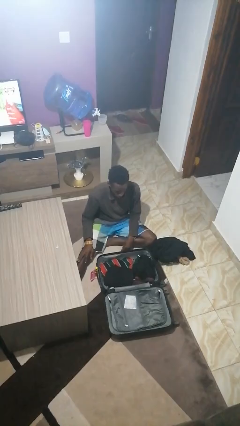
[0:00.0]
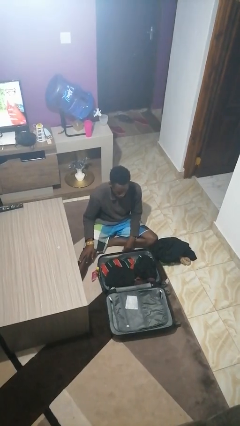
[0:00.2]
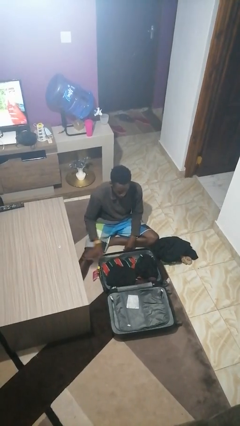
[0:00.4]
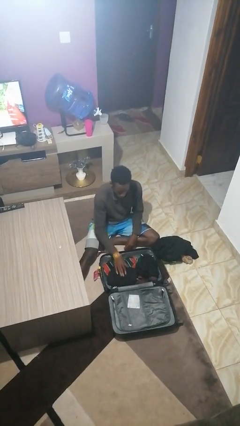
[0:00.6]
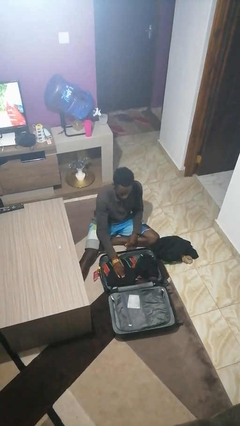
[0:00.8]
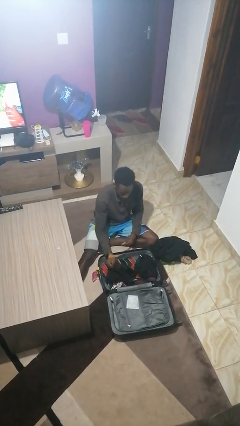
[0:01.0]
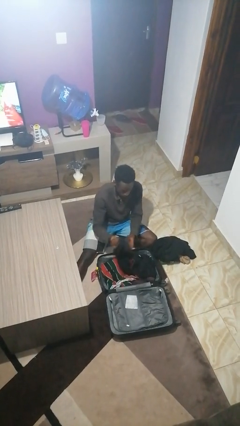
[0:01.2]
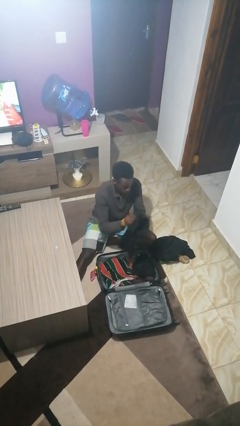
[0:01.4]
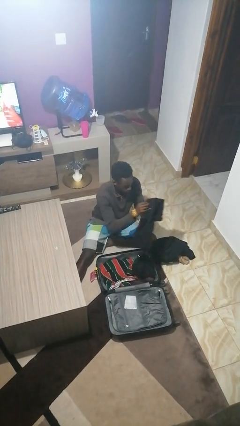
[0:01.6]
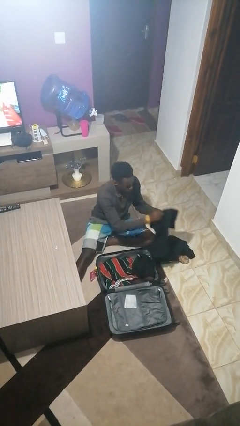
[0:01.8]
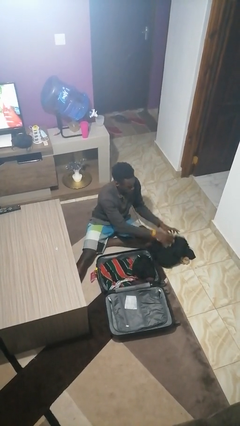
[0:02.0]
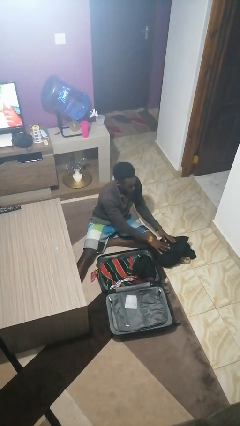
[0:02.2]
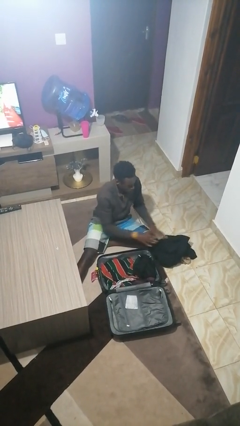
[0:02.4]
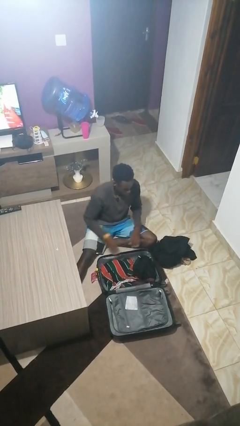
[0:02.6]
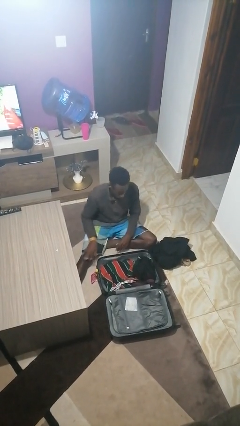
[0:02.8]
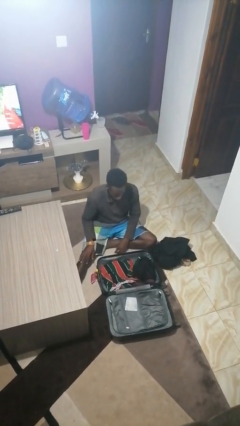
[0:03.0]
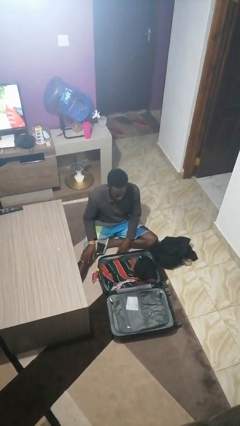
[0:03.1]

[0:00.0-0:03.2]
person unloads clothes from suitcase

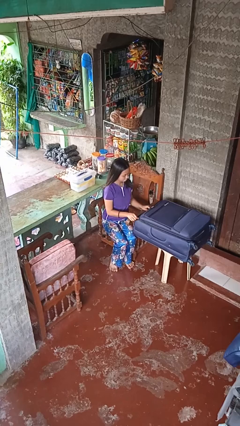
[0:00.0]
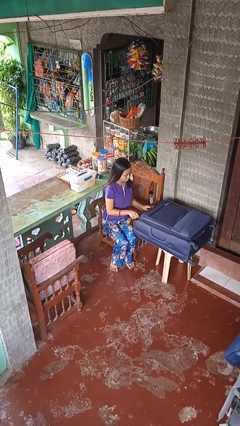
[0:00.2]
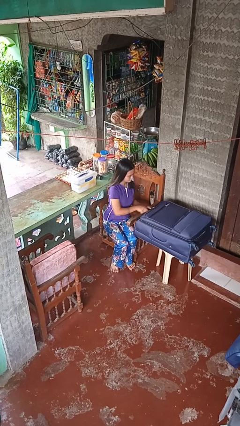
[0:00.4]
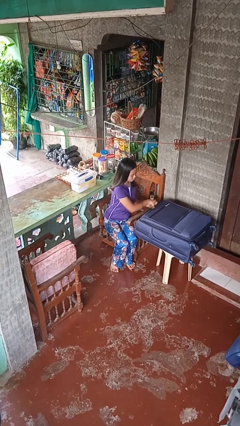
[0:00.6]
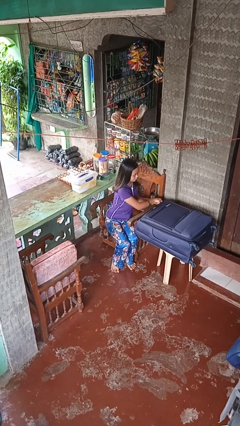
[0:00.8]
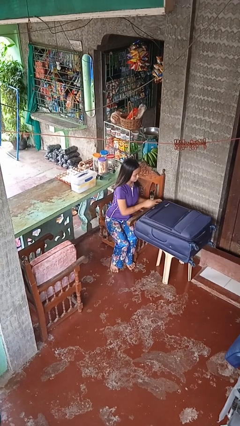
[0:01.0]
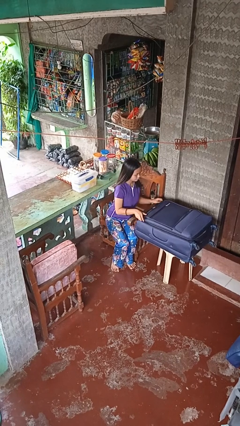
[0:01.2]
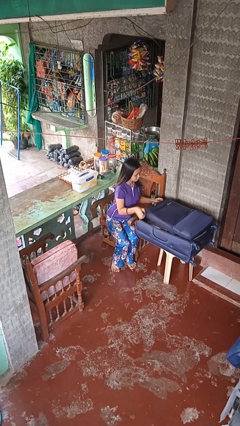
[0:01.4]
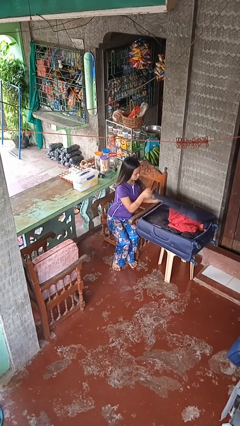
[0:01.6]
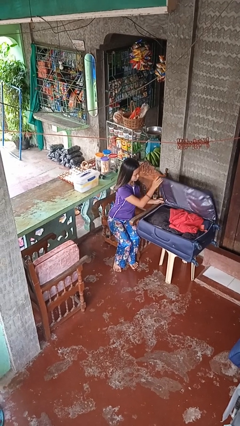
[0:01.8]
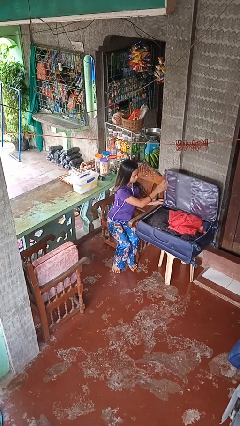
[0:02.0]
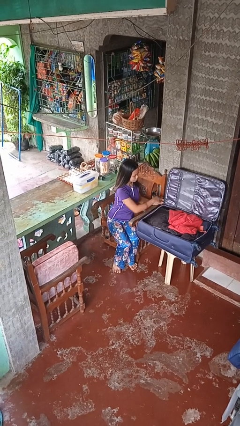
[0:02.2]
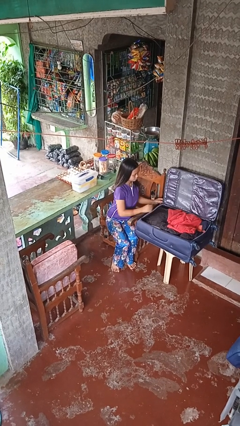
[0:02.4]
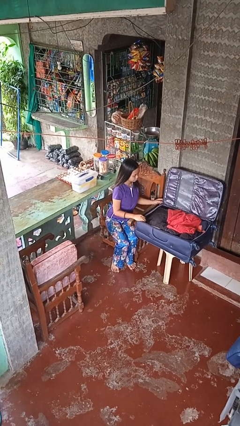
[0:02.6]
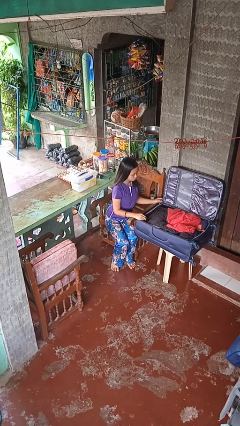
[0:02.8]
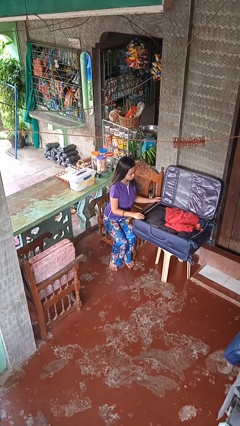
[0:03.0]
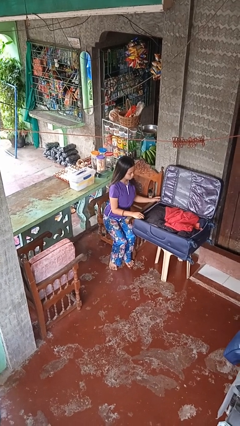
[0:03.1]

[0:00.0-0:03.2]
person opens suitcase

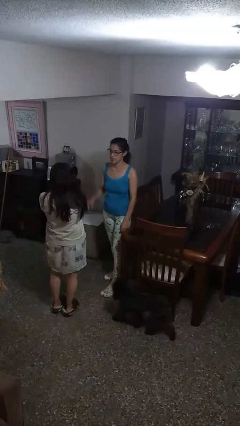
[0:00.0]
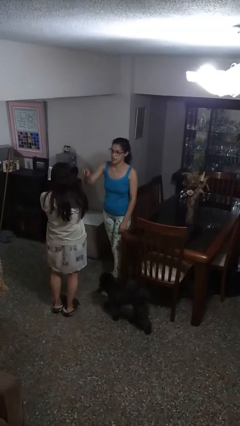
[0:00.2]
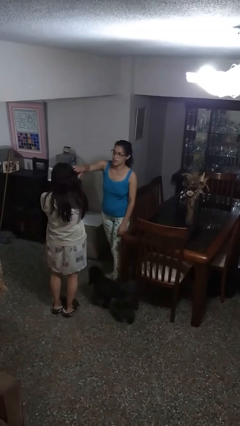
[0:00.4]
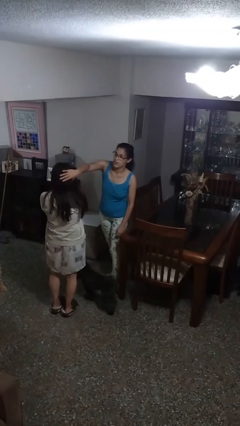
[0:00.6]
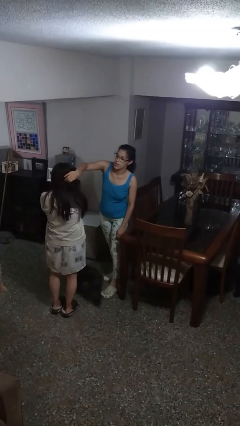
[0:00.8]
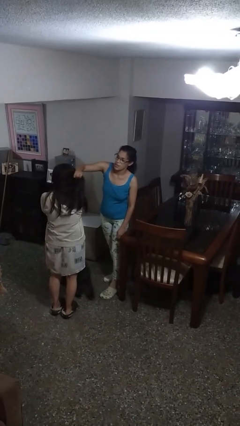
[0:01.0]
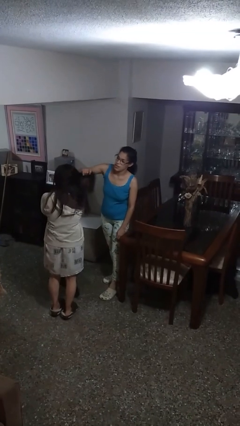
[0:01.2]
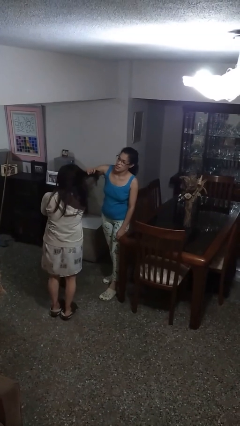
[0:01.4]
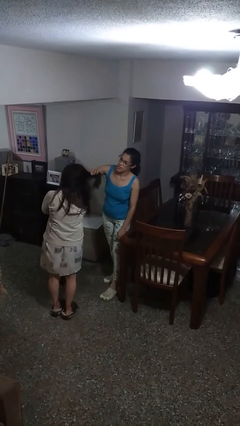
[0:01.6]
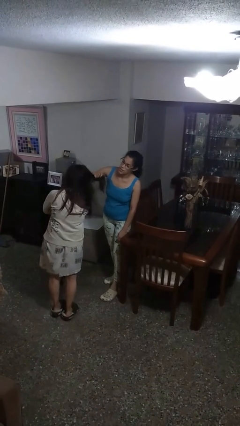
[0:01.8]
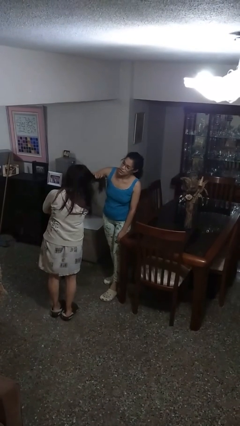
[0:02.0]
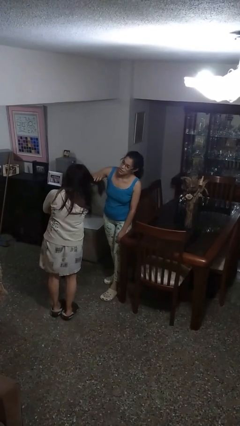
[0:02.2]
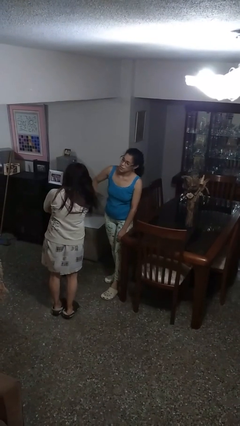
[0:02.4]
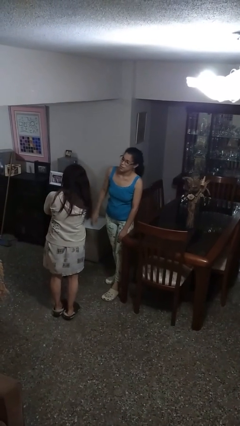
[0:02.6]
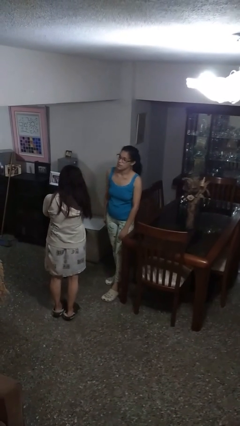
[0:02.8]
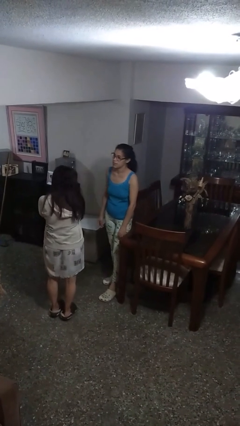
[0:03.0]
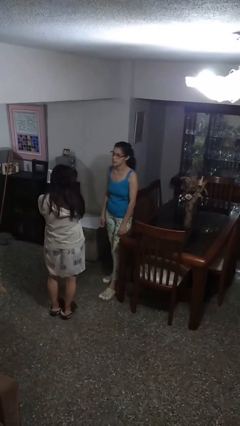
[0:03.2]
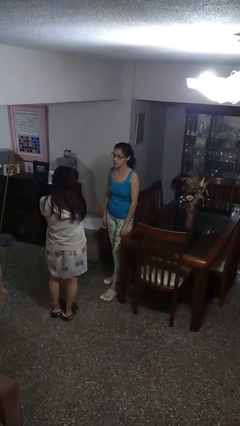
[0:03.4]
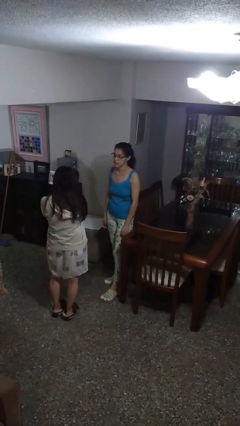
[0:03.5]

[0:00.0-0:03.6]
person grabs person by hair

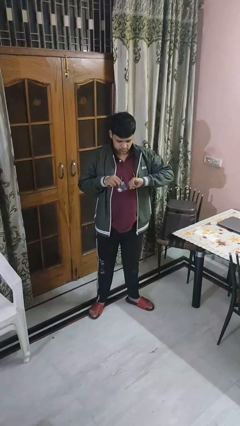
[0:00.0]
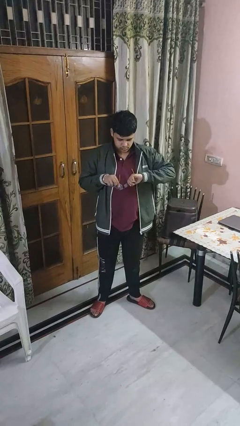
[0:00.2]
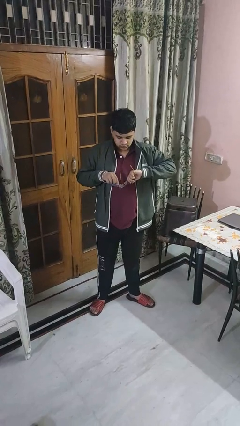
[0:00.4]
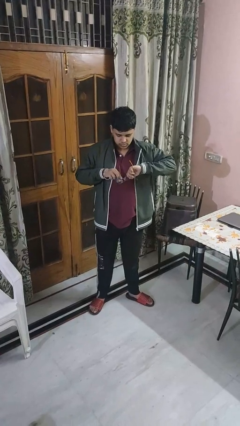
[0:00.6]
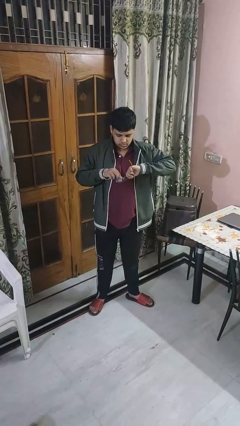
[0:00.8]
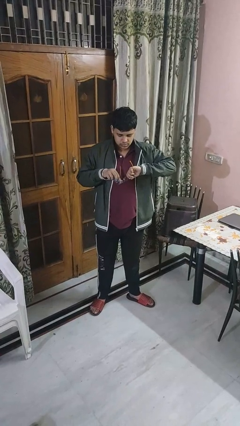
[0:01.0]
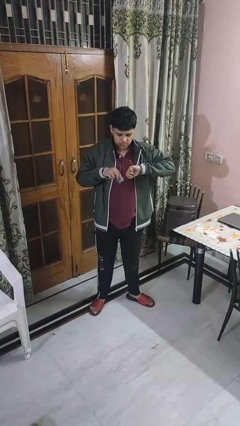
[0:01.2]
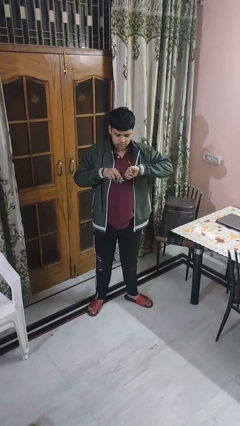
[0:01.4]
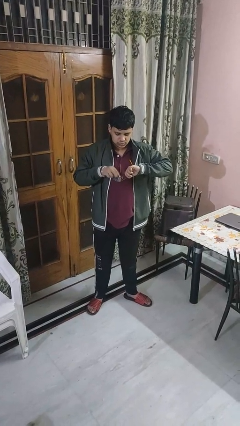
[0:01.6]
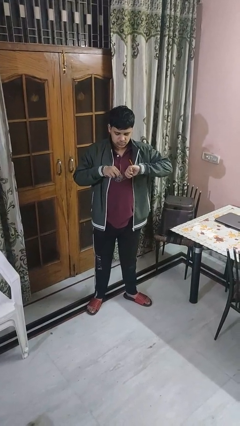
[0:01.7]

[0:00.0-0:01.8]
person cleans eyeglasses

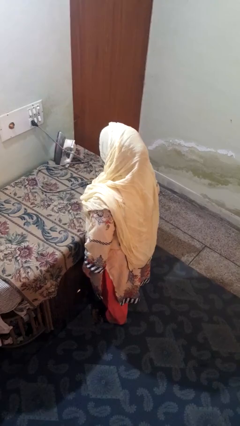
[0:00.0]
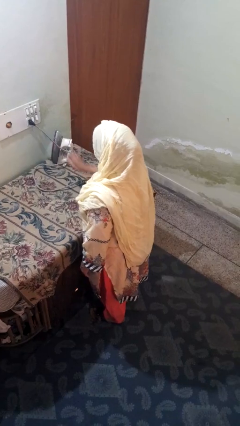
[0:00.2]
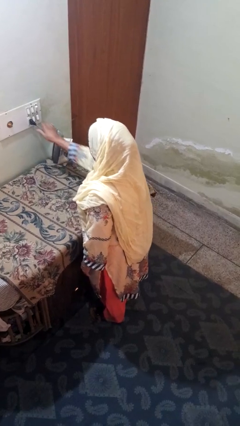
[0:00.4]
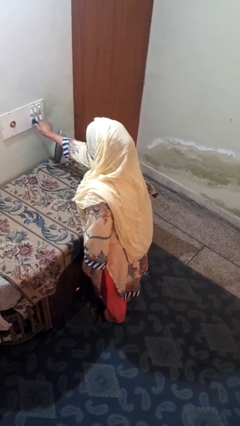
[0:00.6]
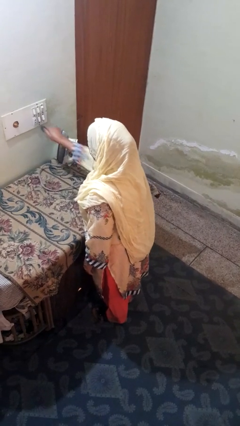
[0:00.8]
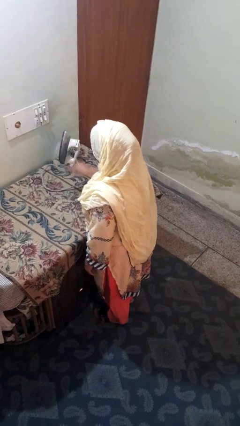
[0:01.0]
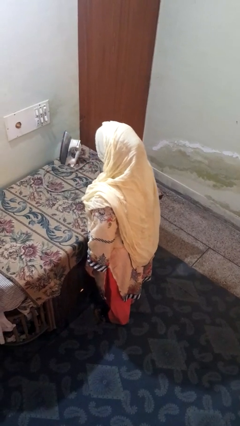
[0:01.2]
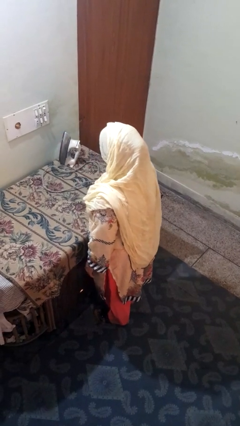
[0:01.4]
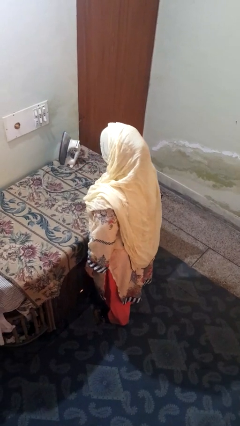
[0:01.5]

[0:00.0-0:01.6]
person unplugs from electrical socket

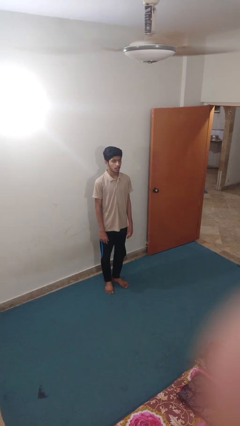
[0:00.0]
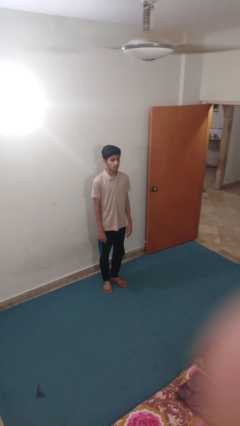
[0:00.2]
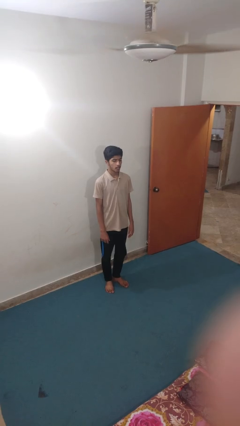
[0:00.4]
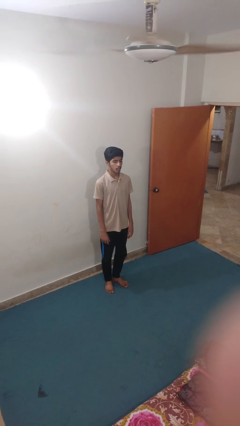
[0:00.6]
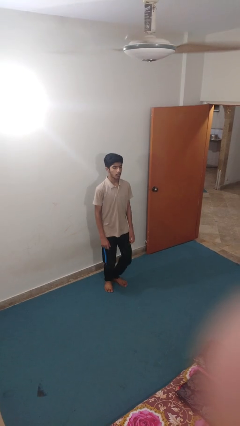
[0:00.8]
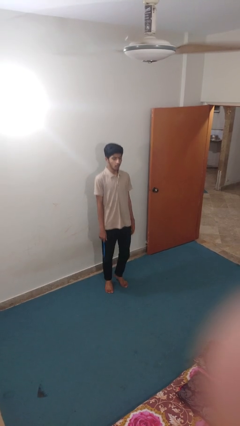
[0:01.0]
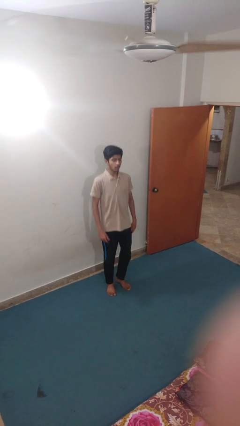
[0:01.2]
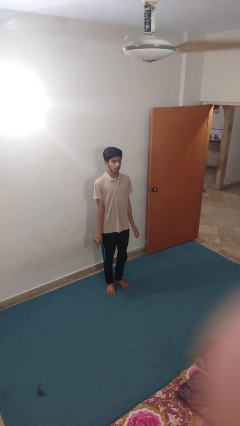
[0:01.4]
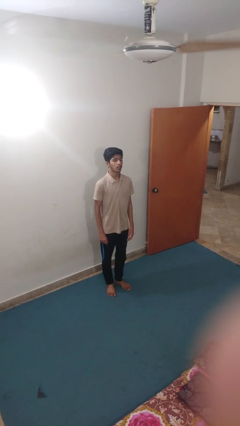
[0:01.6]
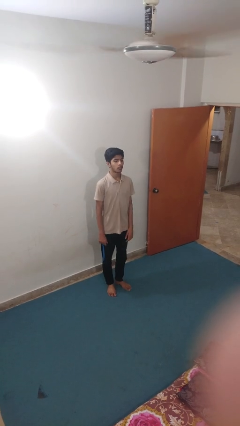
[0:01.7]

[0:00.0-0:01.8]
person jumps

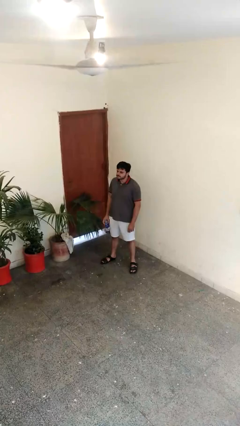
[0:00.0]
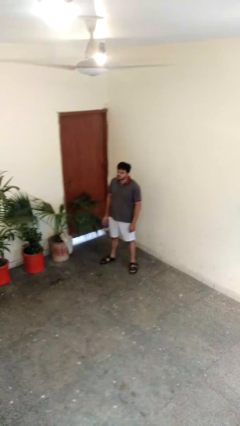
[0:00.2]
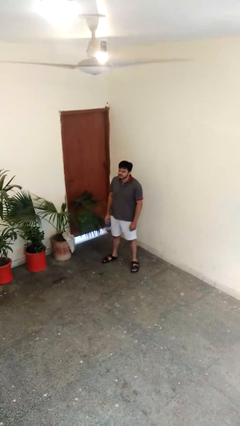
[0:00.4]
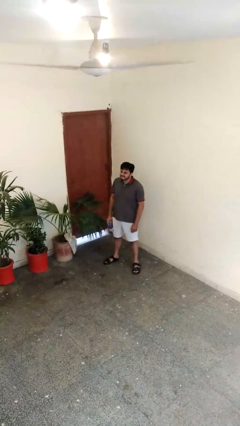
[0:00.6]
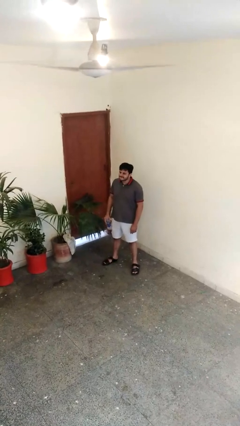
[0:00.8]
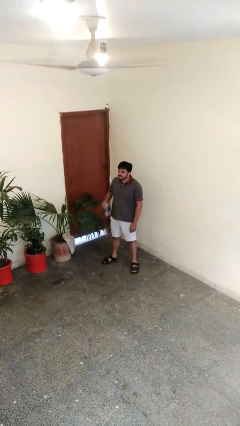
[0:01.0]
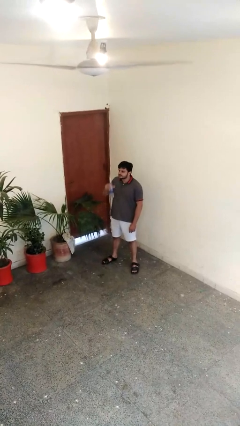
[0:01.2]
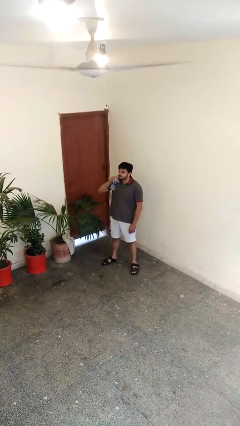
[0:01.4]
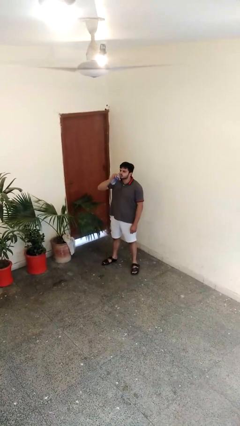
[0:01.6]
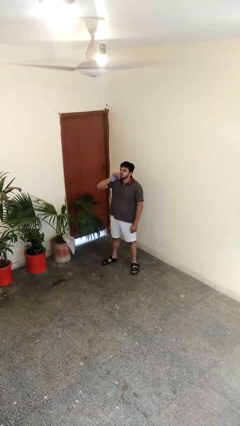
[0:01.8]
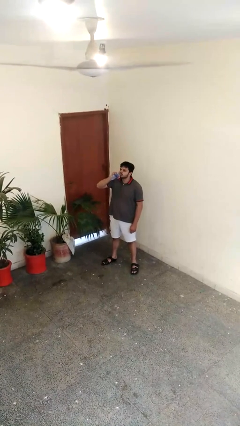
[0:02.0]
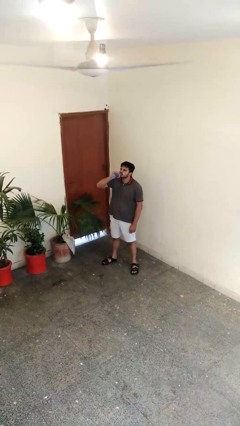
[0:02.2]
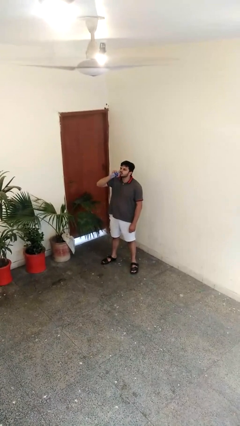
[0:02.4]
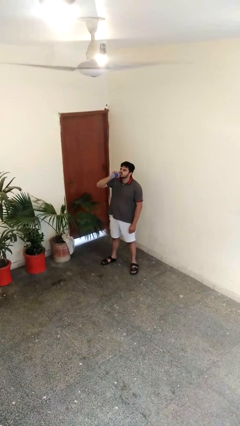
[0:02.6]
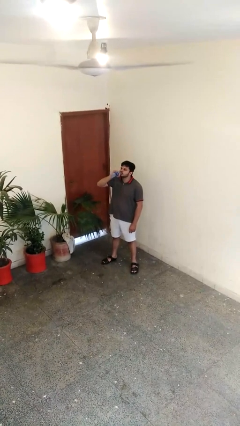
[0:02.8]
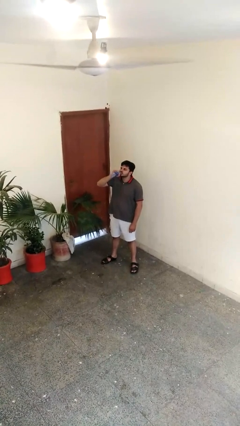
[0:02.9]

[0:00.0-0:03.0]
person drinks from bottle
